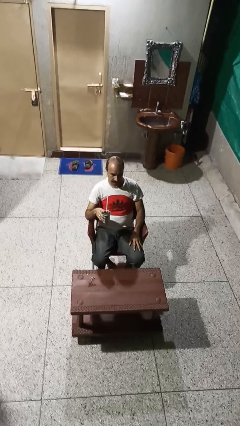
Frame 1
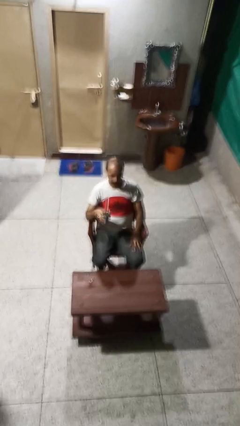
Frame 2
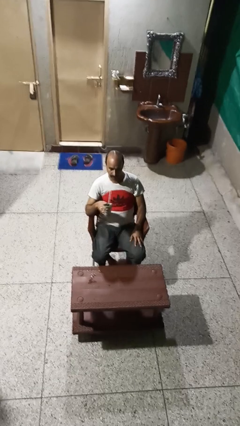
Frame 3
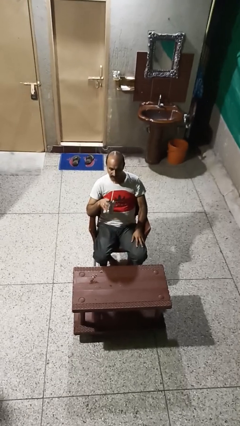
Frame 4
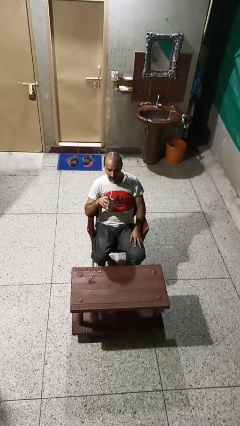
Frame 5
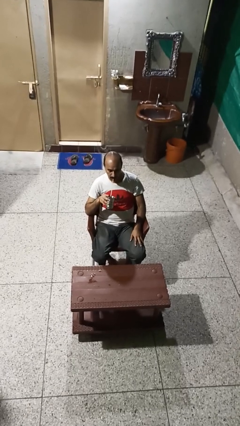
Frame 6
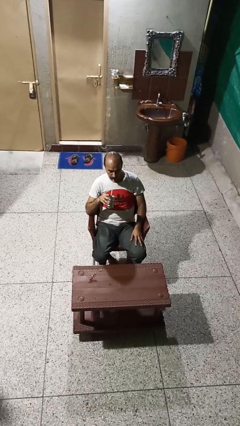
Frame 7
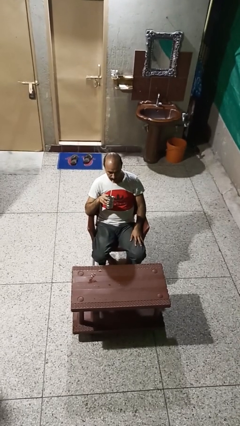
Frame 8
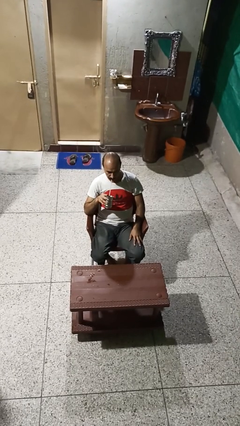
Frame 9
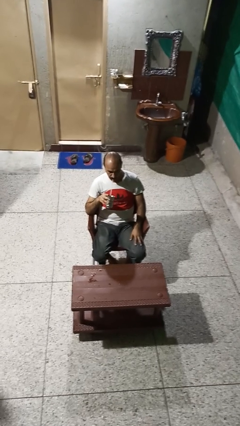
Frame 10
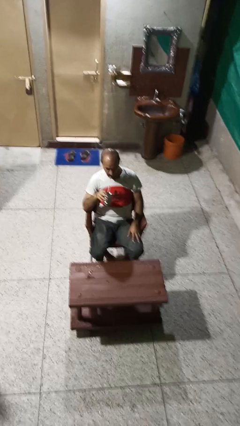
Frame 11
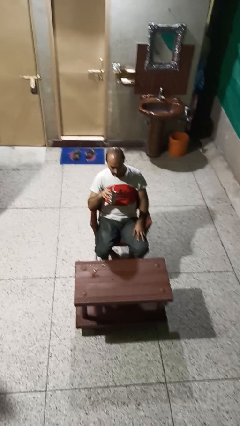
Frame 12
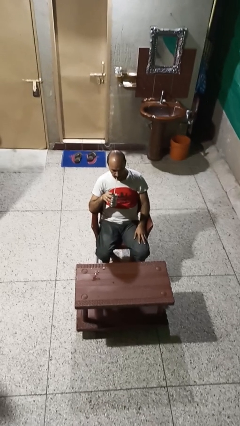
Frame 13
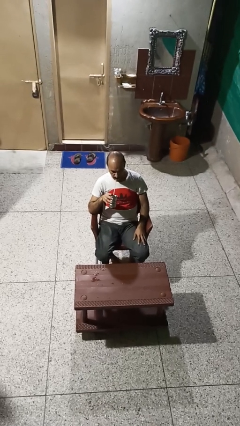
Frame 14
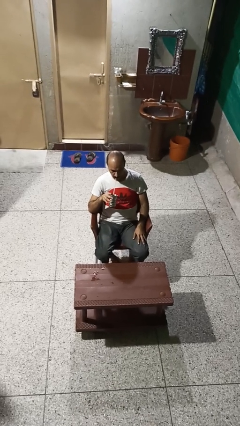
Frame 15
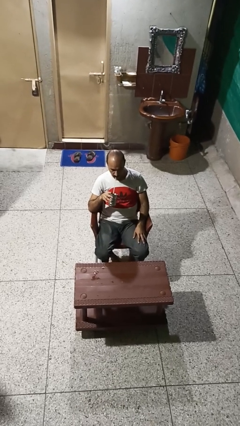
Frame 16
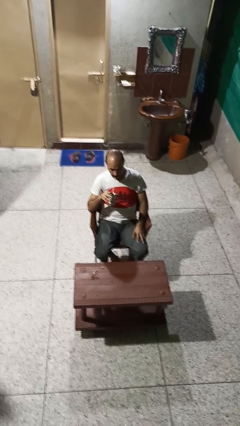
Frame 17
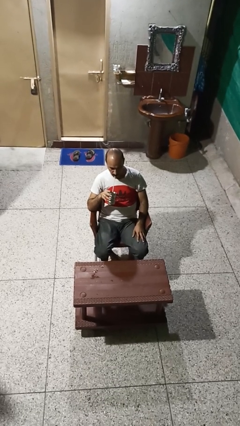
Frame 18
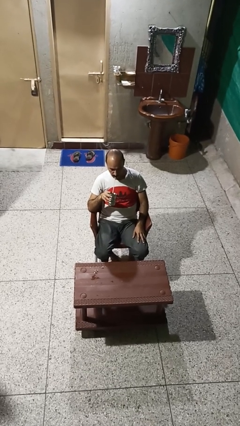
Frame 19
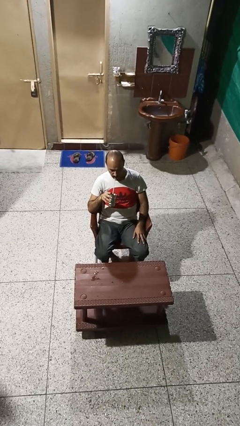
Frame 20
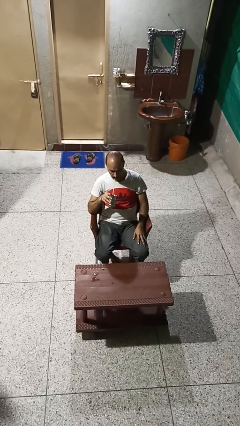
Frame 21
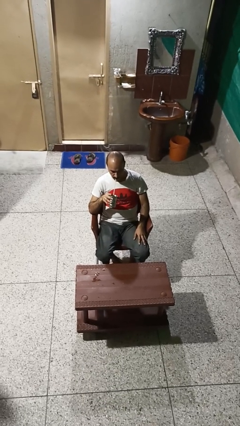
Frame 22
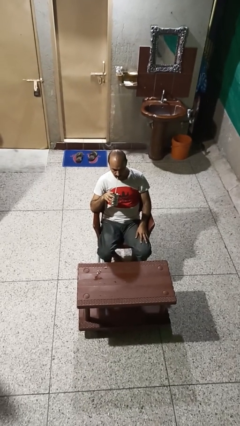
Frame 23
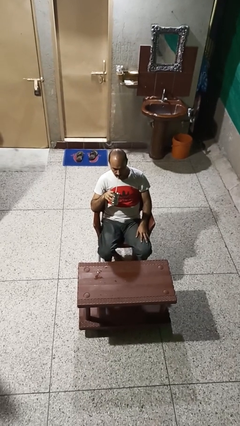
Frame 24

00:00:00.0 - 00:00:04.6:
person drinks from straw

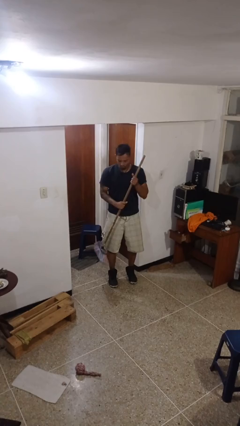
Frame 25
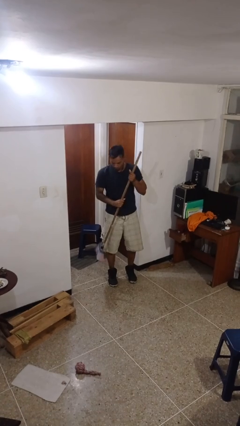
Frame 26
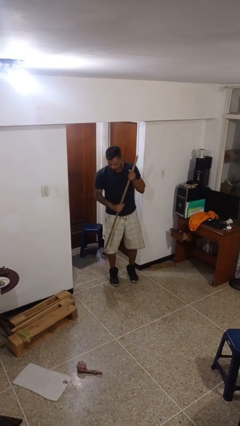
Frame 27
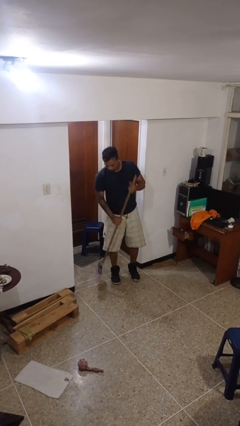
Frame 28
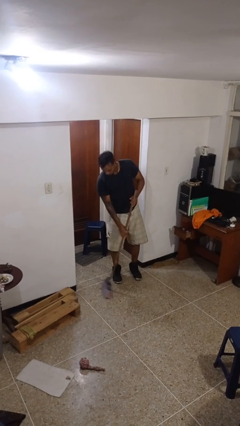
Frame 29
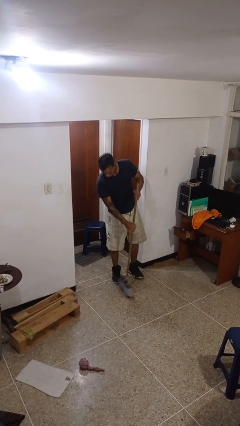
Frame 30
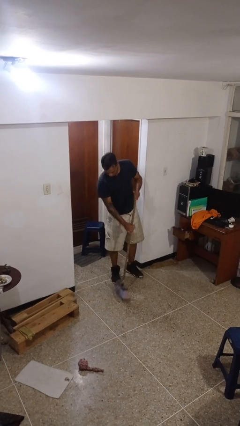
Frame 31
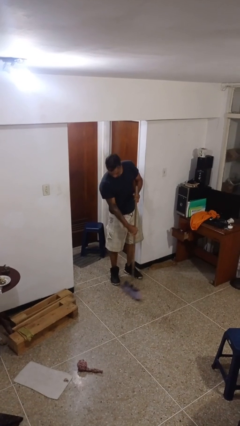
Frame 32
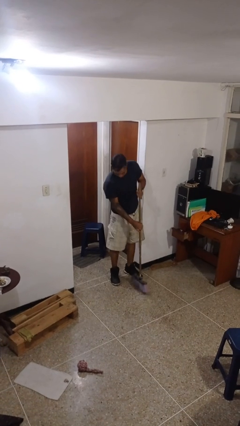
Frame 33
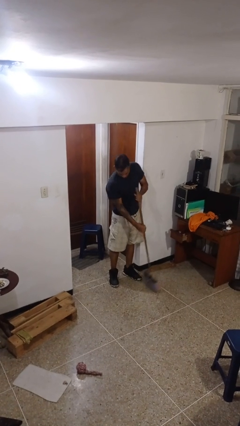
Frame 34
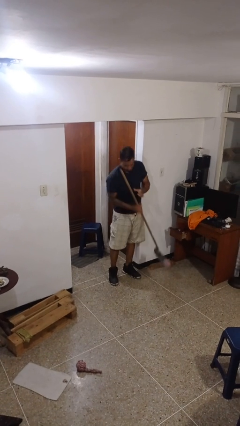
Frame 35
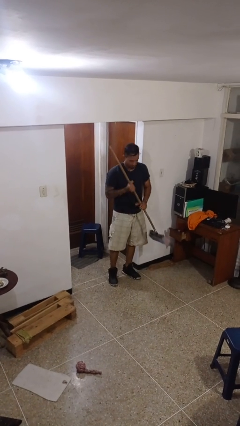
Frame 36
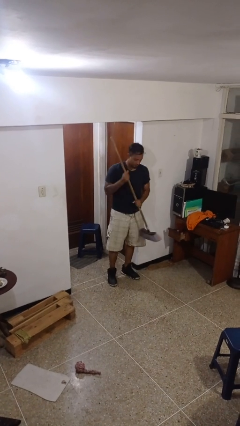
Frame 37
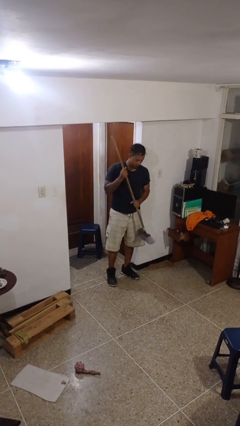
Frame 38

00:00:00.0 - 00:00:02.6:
person sweeps floor

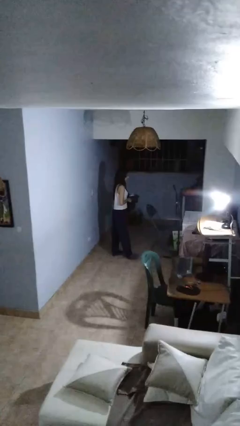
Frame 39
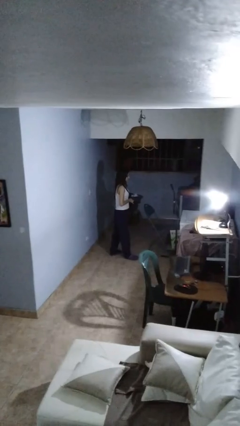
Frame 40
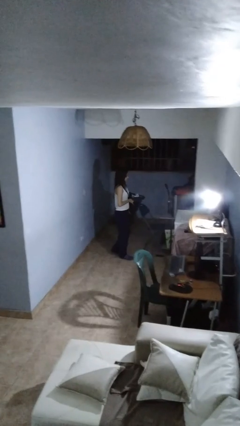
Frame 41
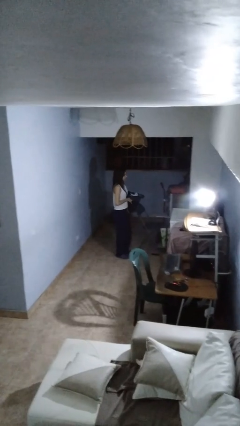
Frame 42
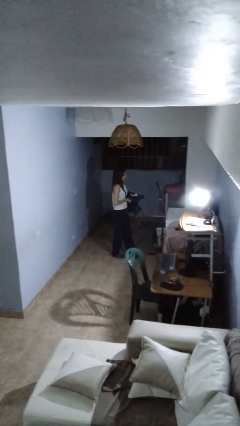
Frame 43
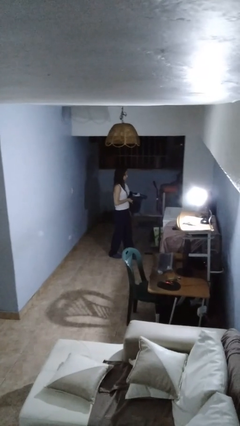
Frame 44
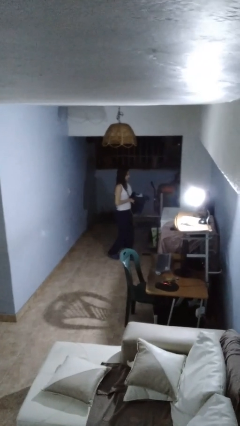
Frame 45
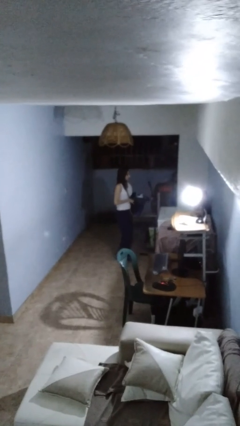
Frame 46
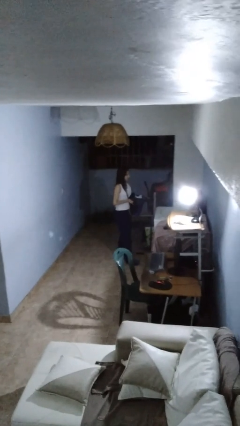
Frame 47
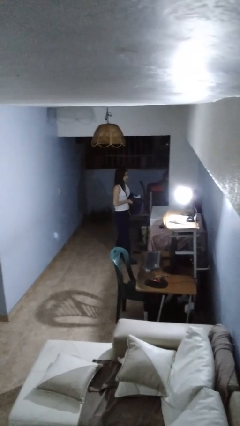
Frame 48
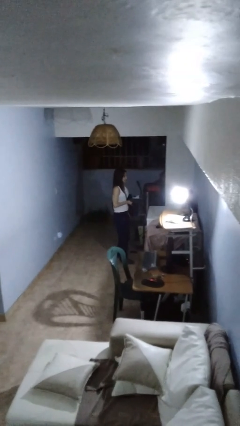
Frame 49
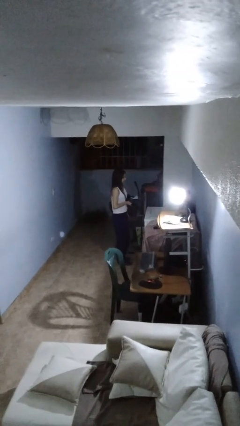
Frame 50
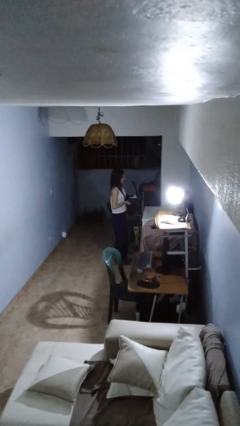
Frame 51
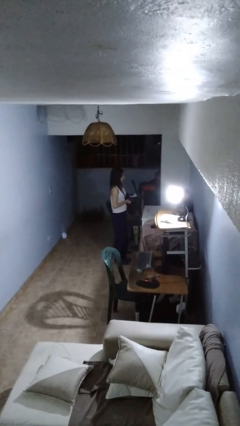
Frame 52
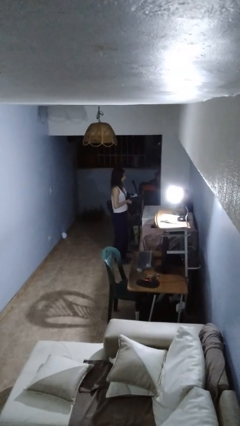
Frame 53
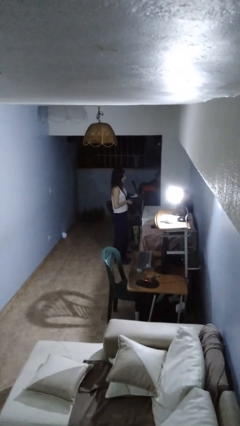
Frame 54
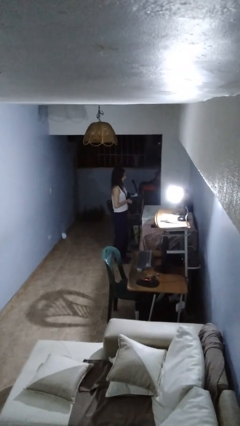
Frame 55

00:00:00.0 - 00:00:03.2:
person carries laundry basket

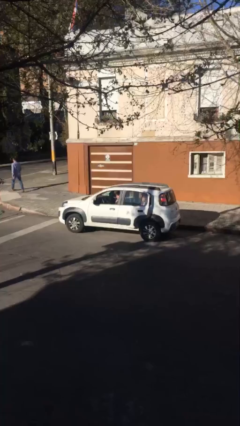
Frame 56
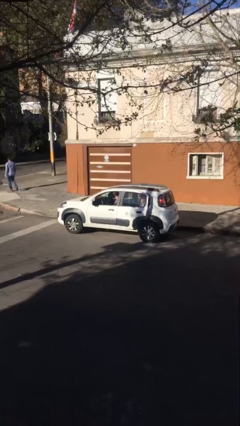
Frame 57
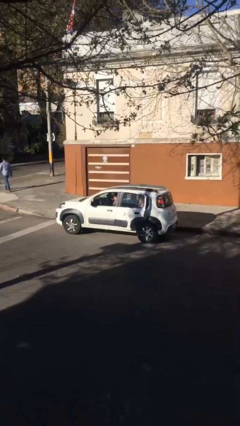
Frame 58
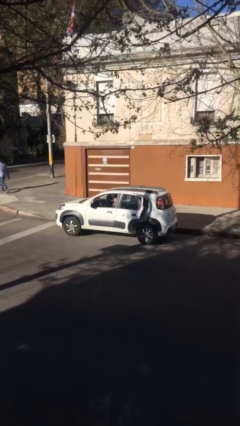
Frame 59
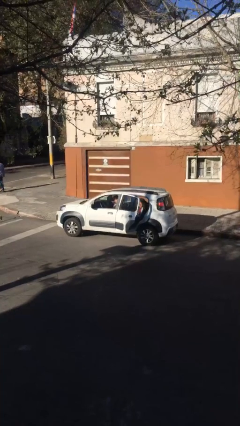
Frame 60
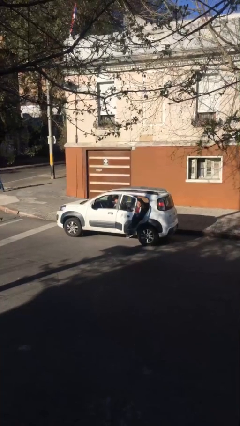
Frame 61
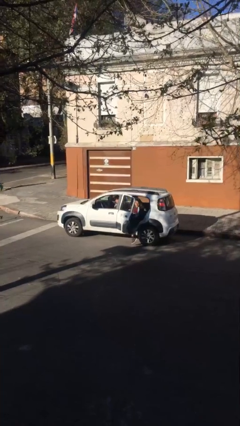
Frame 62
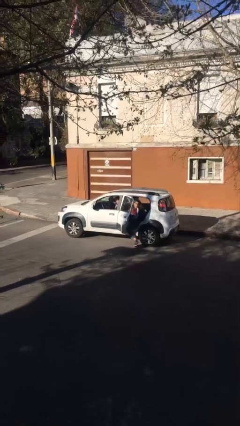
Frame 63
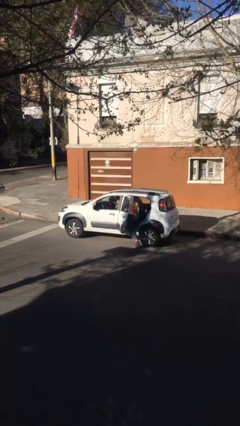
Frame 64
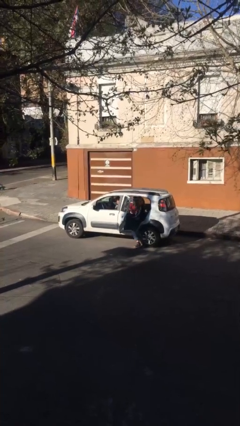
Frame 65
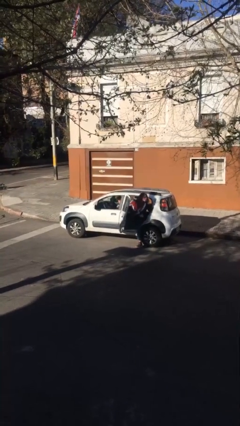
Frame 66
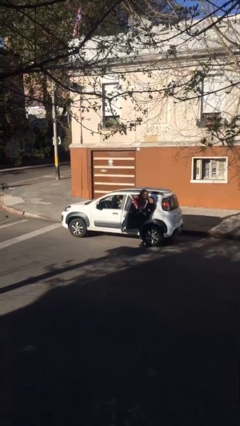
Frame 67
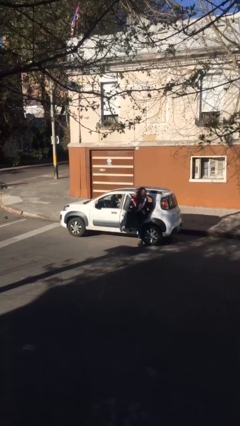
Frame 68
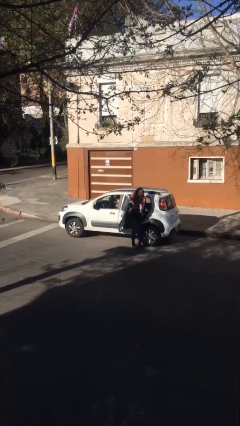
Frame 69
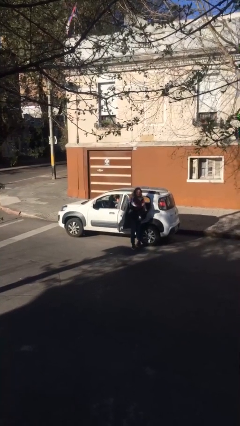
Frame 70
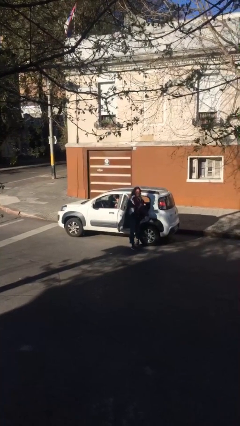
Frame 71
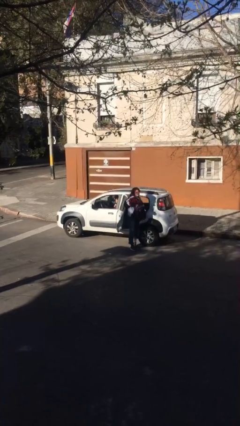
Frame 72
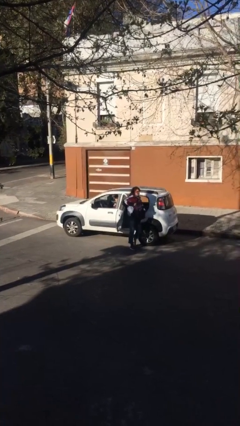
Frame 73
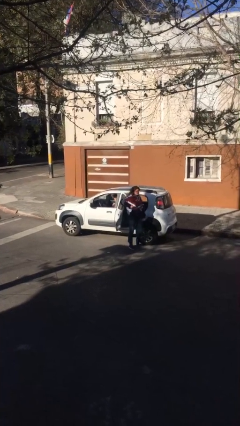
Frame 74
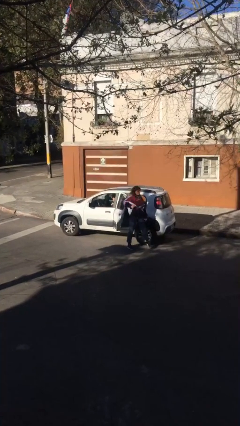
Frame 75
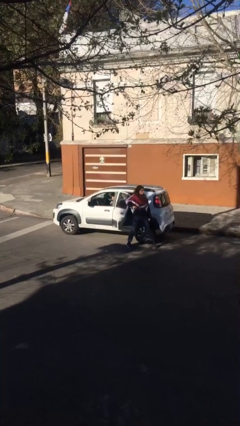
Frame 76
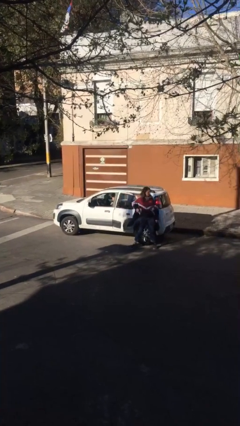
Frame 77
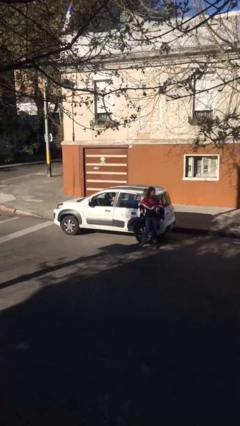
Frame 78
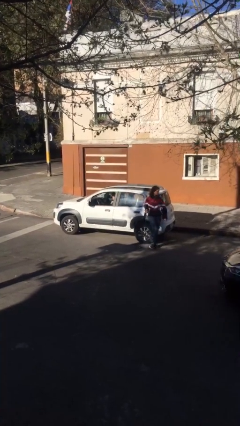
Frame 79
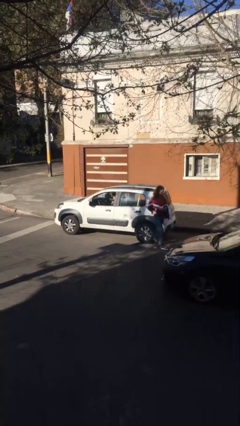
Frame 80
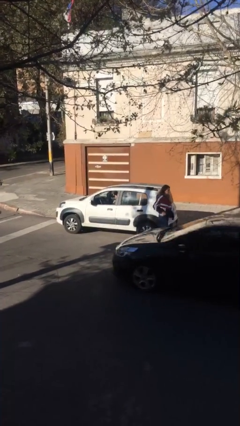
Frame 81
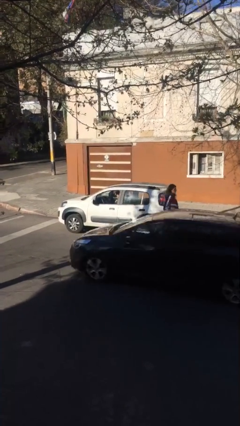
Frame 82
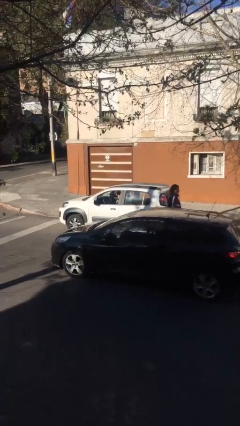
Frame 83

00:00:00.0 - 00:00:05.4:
car drops off person

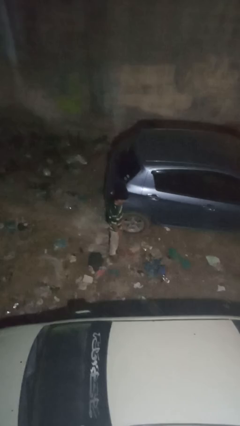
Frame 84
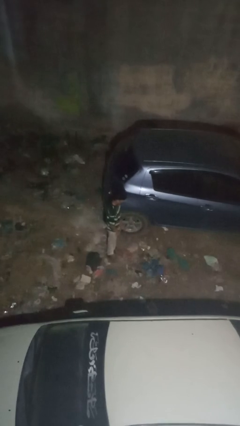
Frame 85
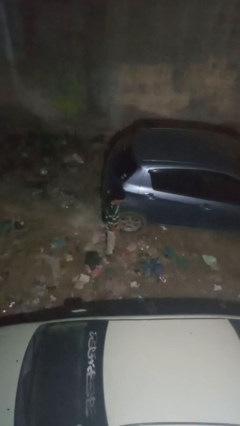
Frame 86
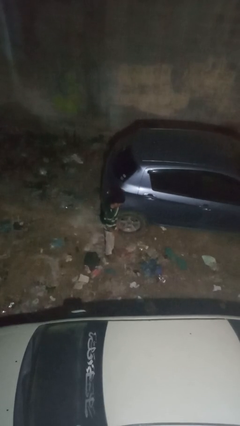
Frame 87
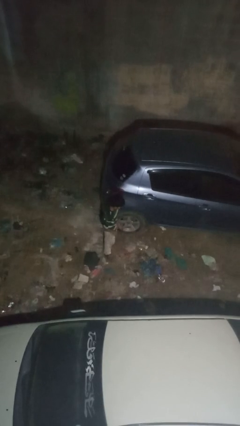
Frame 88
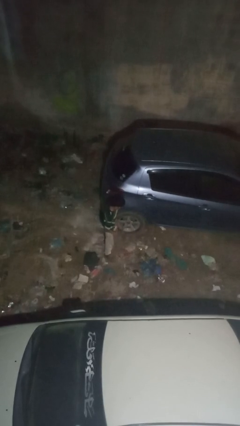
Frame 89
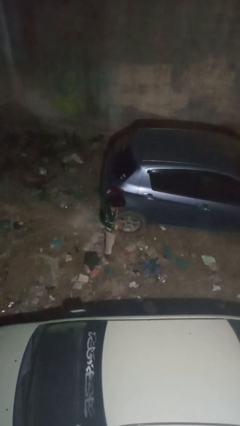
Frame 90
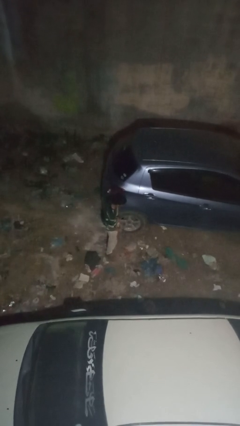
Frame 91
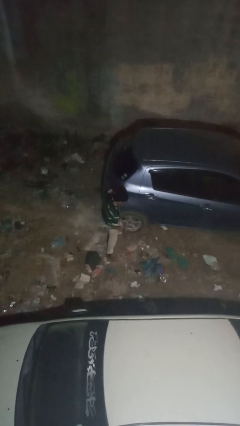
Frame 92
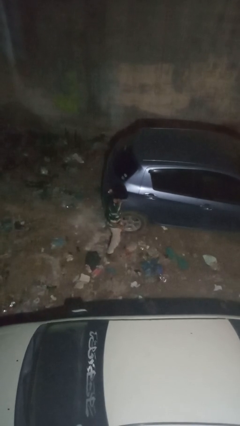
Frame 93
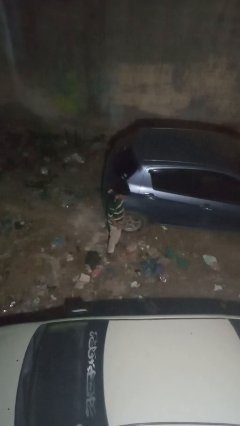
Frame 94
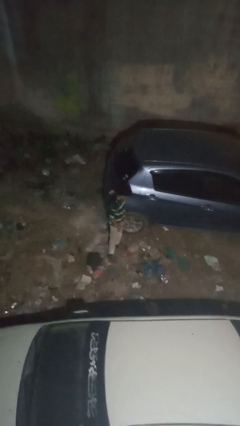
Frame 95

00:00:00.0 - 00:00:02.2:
person kicks car tires
